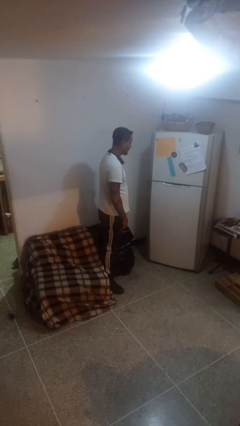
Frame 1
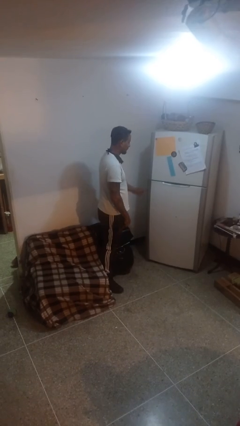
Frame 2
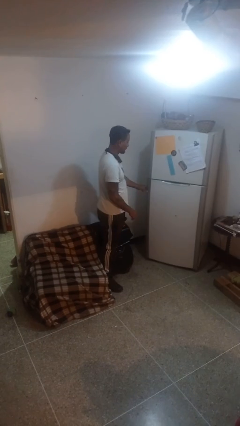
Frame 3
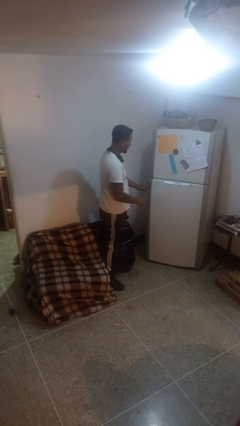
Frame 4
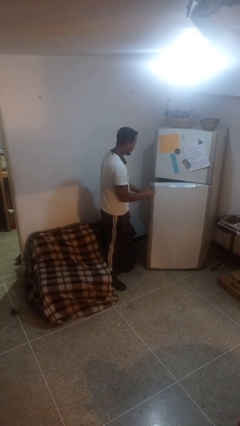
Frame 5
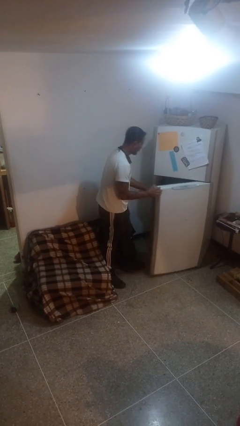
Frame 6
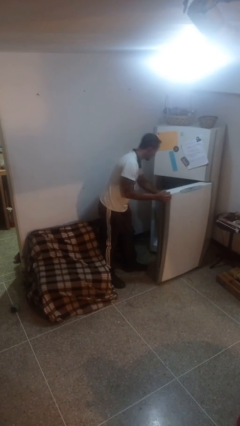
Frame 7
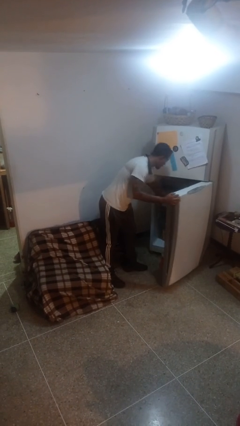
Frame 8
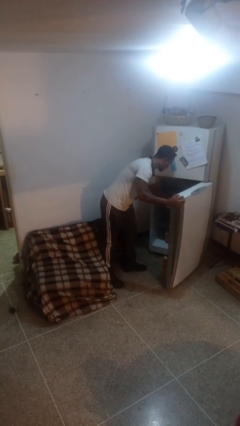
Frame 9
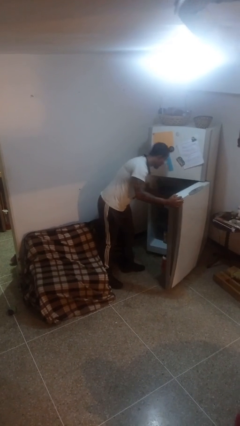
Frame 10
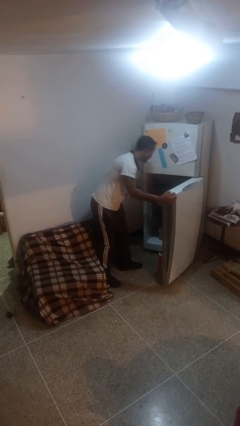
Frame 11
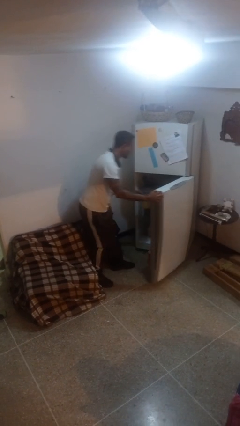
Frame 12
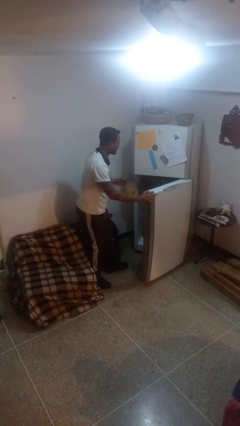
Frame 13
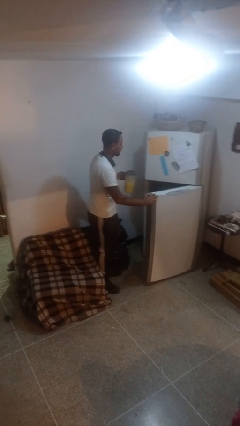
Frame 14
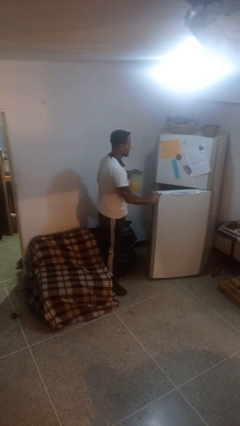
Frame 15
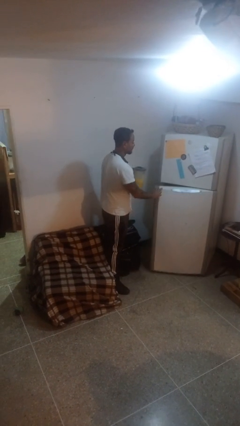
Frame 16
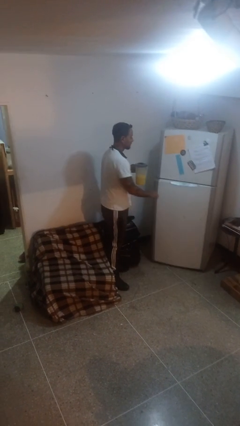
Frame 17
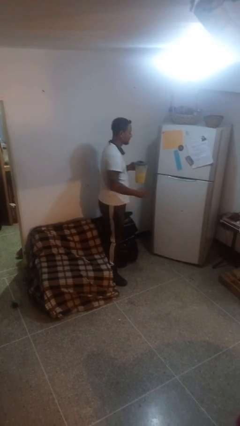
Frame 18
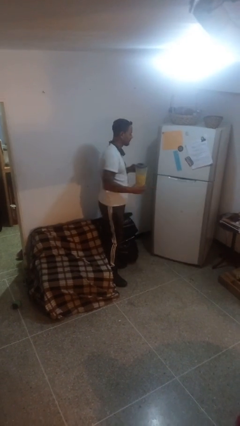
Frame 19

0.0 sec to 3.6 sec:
person takes object from refrigerator

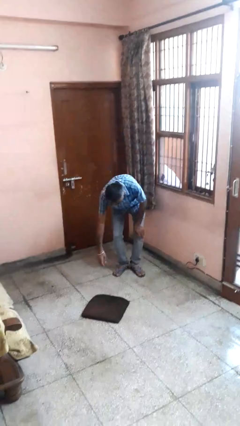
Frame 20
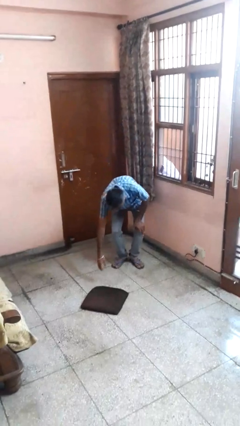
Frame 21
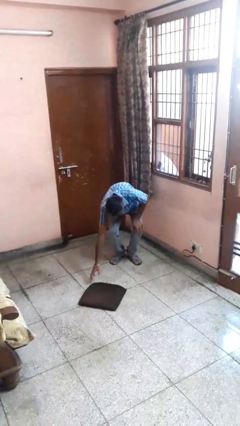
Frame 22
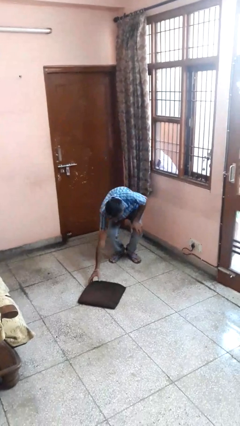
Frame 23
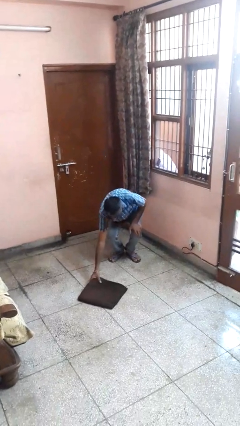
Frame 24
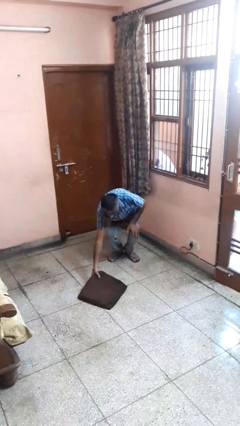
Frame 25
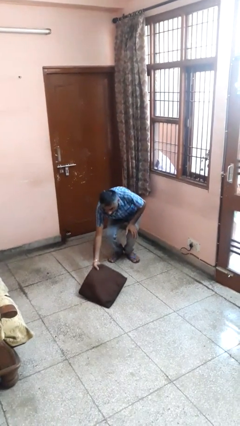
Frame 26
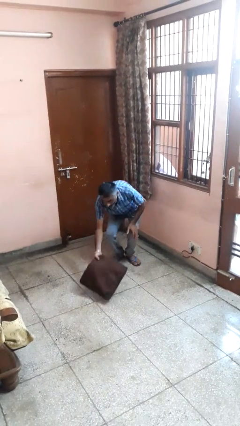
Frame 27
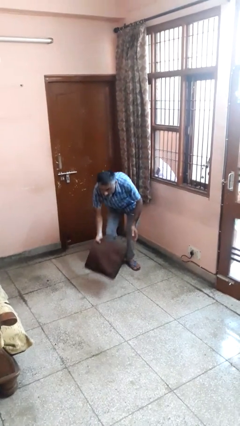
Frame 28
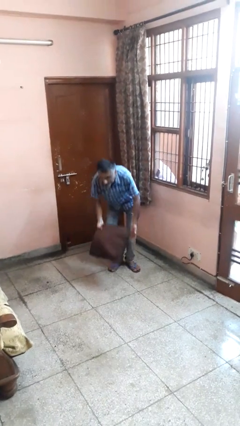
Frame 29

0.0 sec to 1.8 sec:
person picks up object from floor

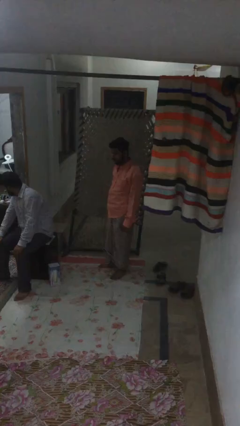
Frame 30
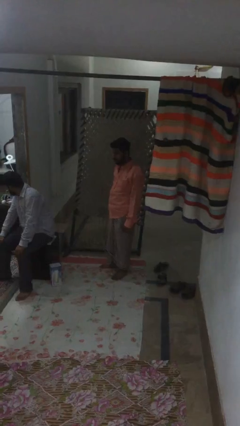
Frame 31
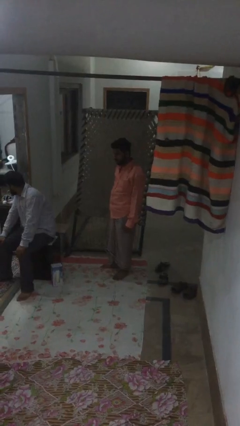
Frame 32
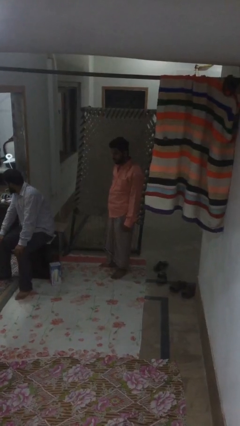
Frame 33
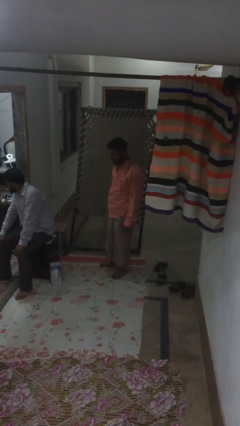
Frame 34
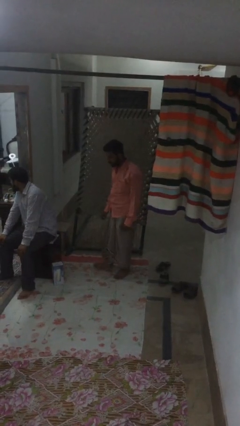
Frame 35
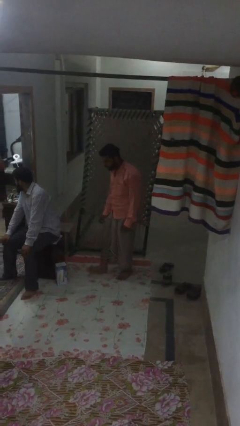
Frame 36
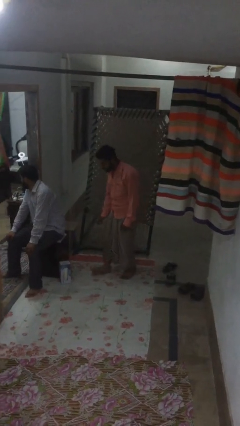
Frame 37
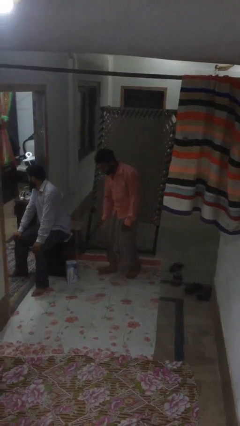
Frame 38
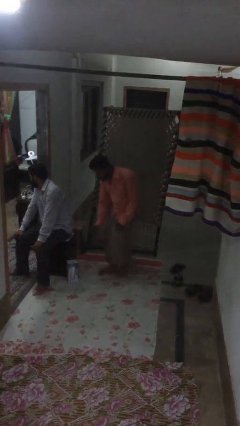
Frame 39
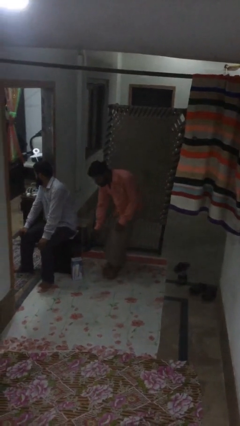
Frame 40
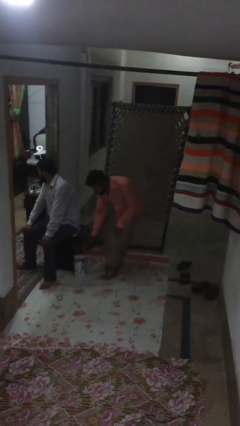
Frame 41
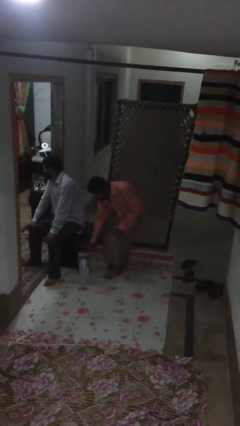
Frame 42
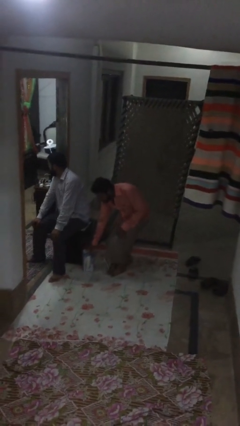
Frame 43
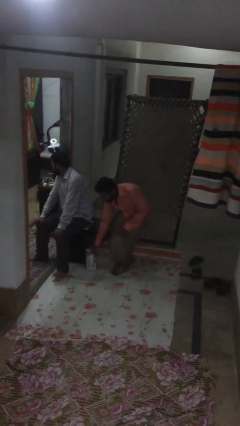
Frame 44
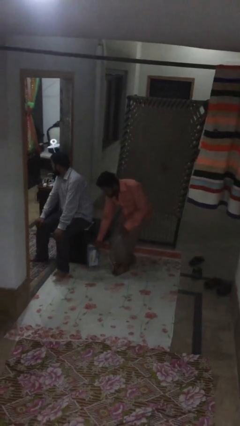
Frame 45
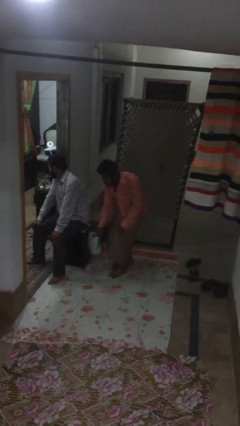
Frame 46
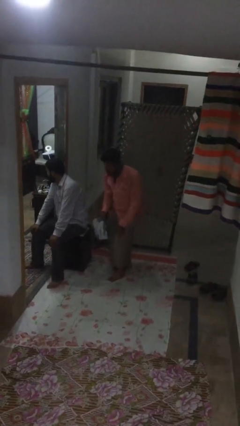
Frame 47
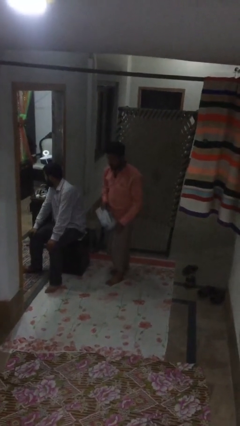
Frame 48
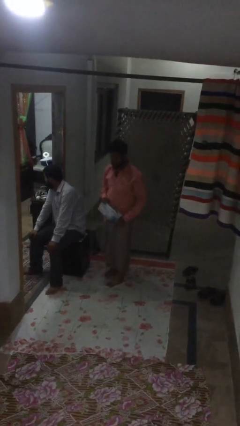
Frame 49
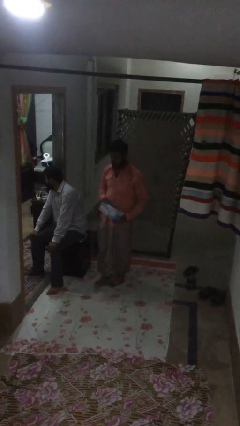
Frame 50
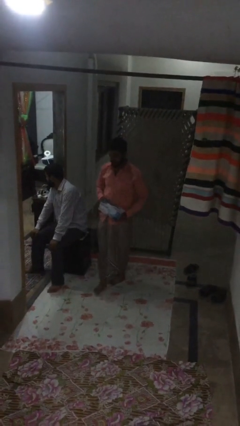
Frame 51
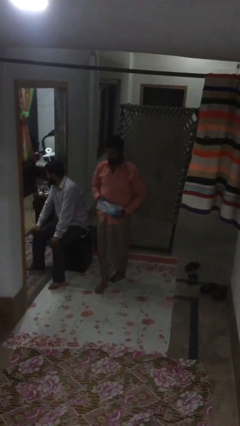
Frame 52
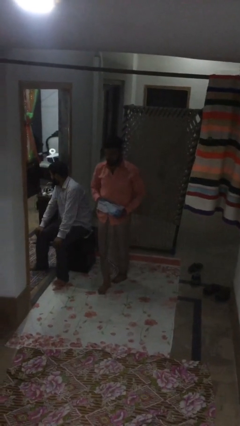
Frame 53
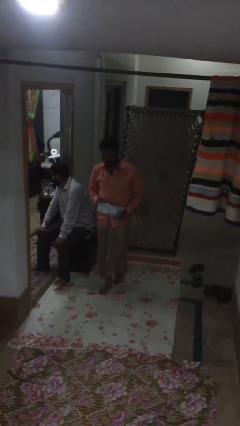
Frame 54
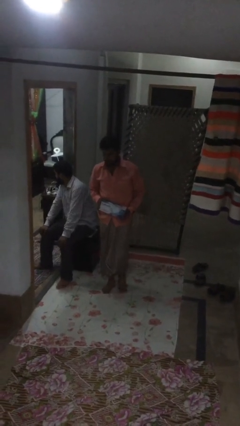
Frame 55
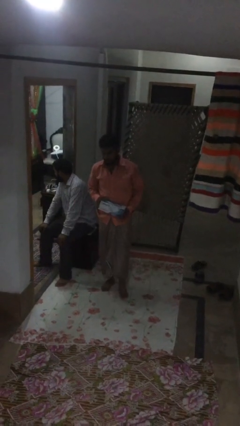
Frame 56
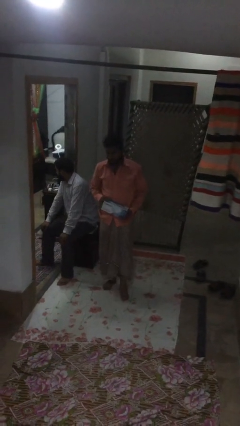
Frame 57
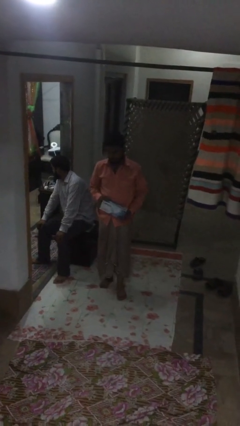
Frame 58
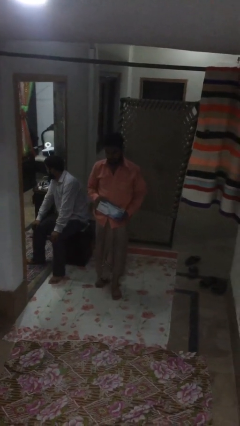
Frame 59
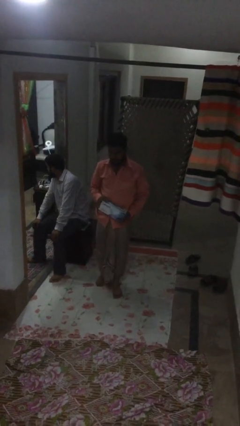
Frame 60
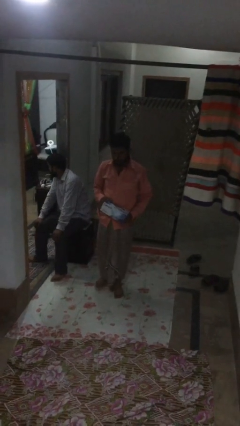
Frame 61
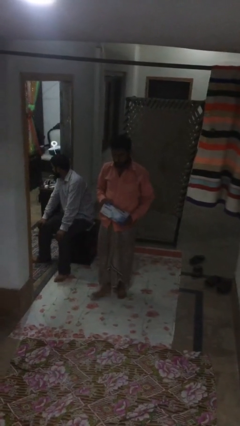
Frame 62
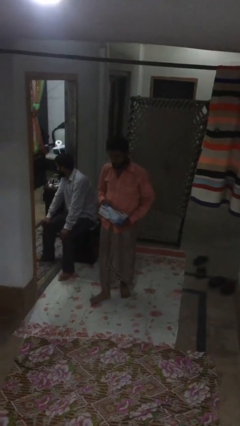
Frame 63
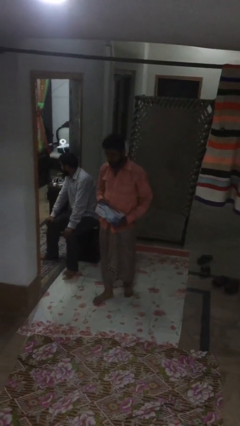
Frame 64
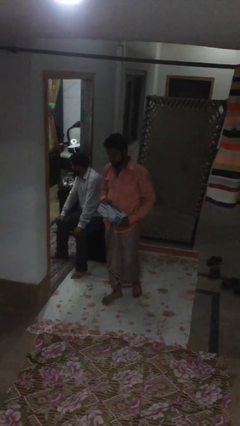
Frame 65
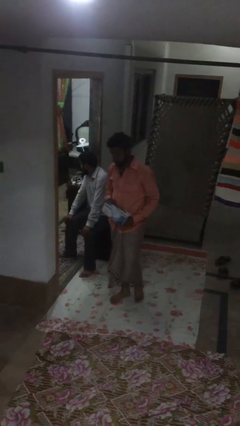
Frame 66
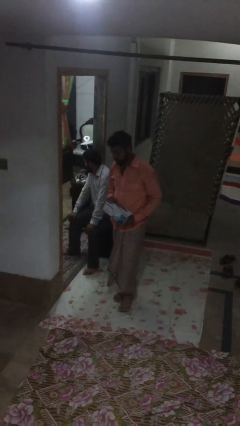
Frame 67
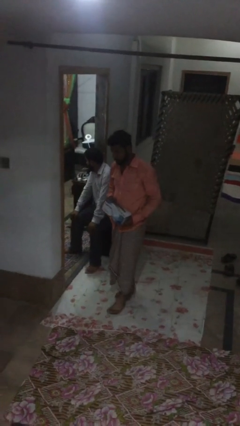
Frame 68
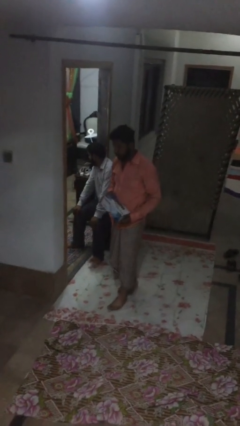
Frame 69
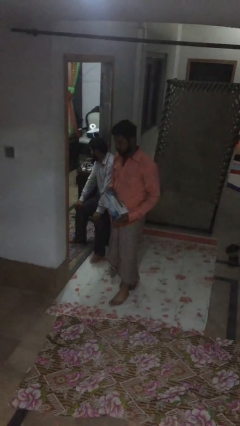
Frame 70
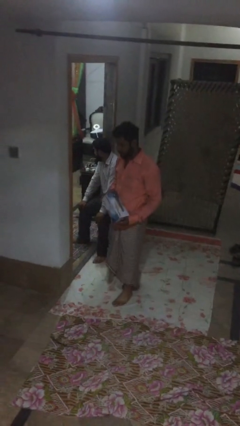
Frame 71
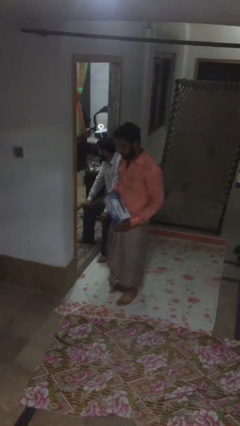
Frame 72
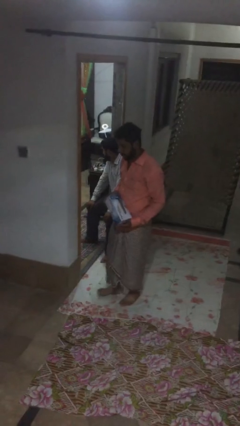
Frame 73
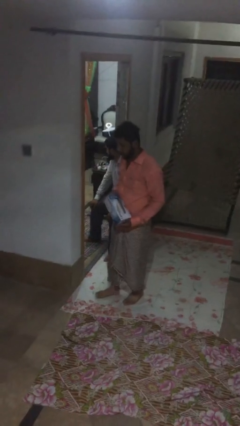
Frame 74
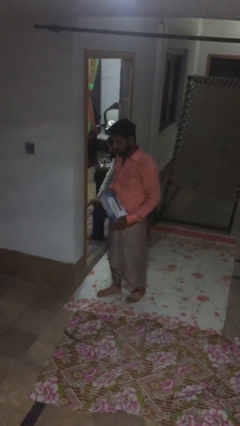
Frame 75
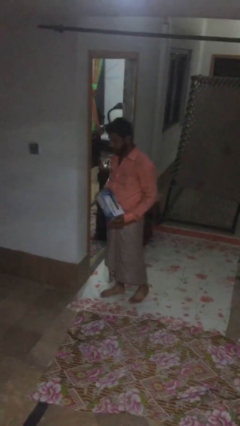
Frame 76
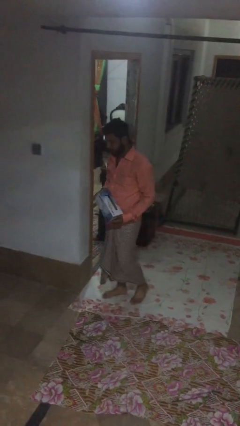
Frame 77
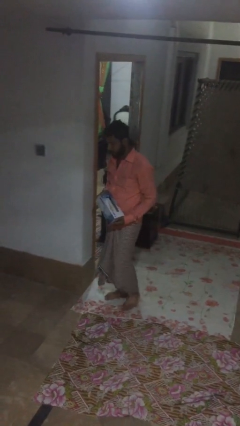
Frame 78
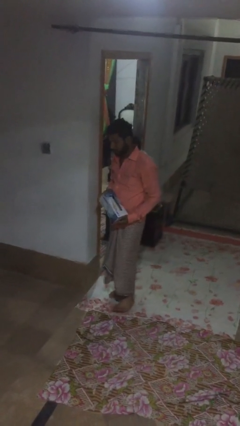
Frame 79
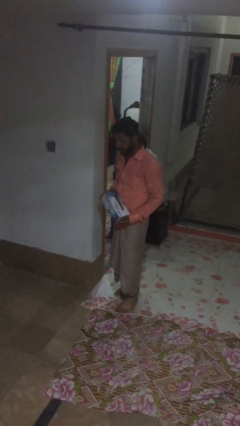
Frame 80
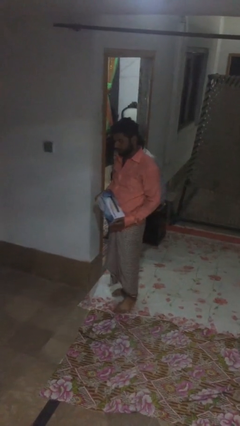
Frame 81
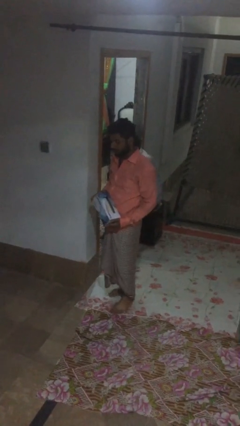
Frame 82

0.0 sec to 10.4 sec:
person steals object from person

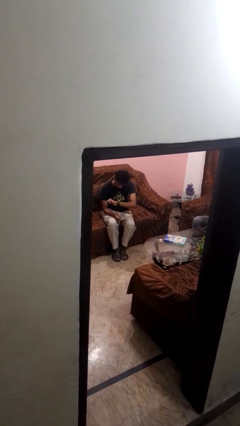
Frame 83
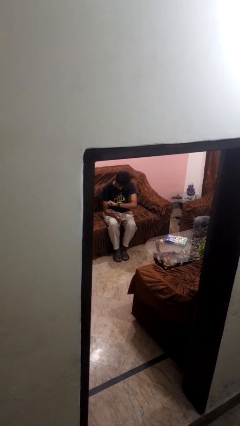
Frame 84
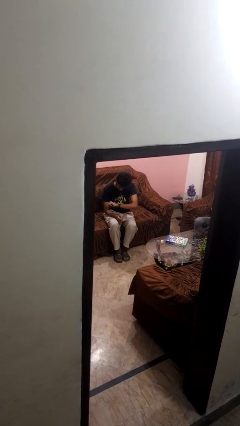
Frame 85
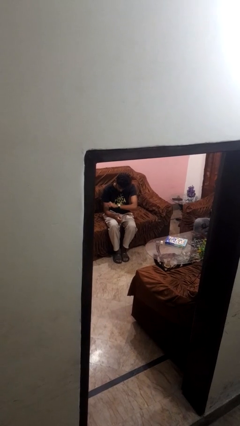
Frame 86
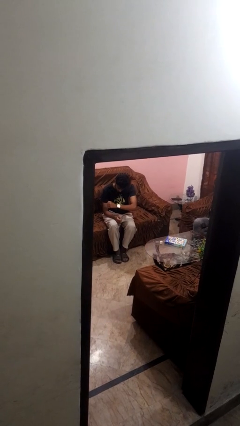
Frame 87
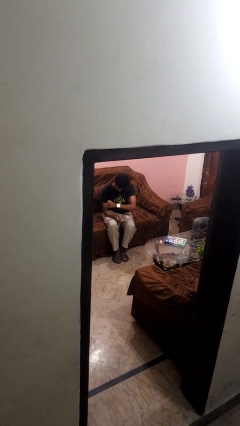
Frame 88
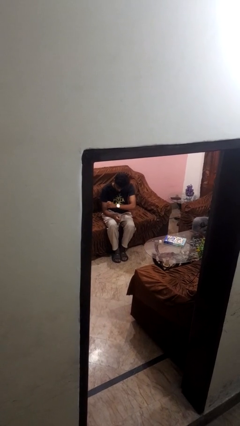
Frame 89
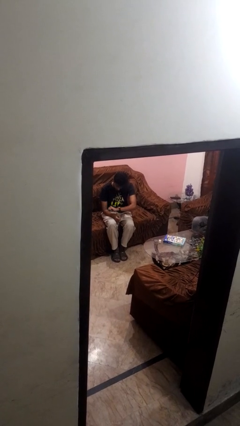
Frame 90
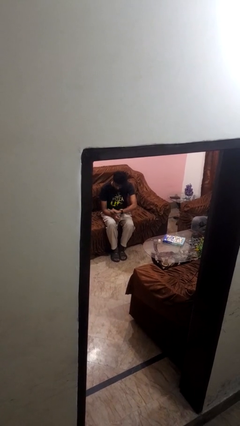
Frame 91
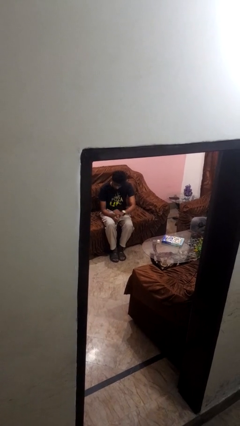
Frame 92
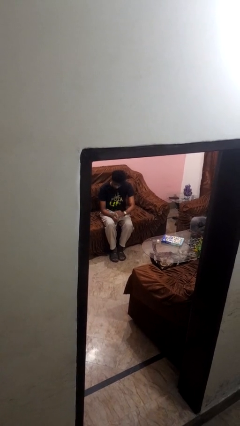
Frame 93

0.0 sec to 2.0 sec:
person looks at wristwatch
